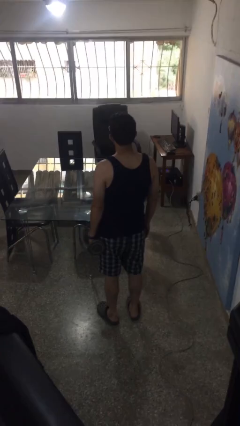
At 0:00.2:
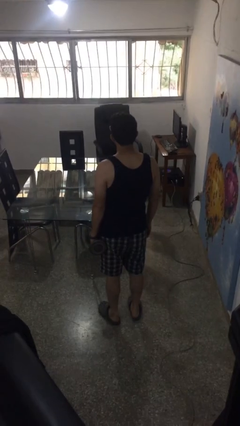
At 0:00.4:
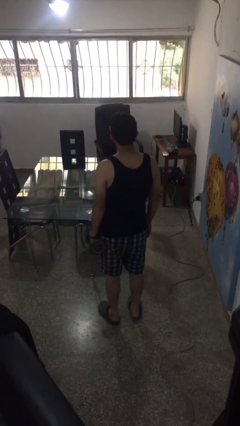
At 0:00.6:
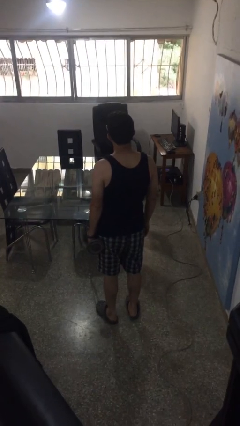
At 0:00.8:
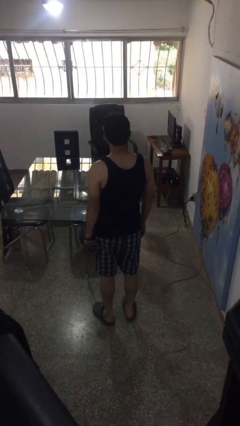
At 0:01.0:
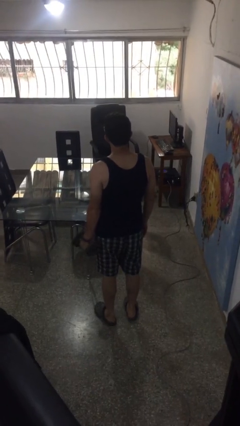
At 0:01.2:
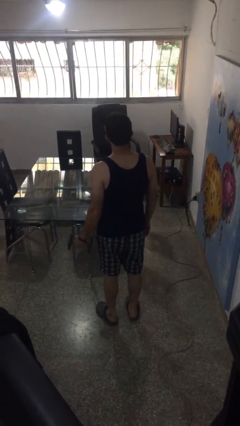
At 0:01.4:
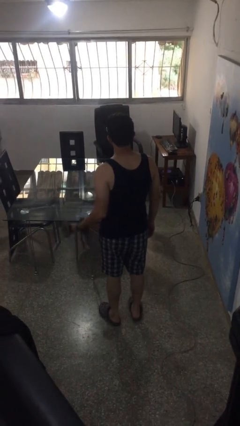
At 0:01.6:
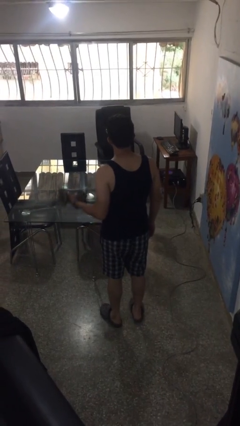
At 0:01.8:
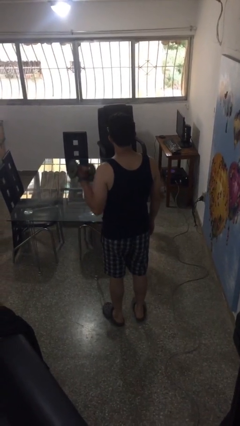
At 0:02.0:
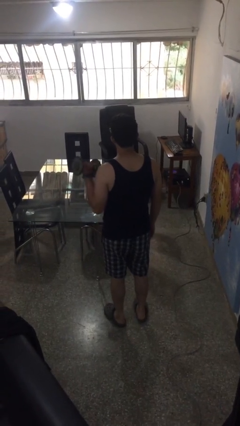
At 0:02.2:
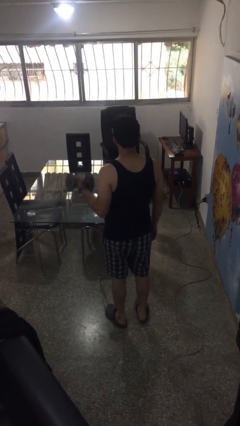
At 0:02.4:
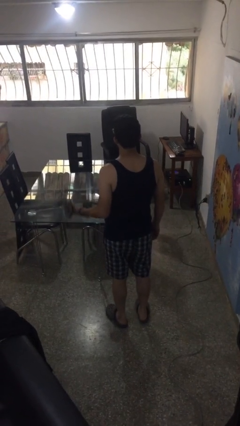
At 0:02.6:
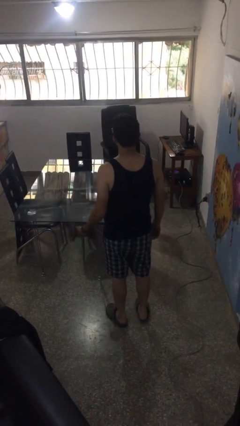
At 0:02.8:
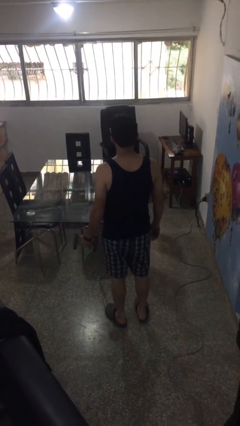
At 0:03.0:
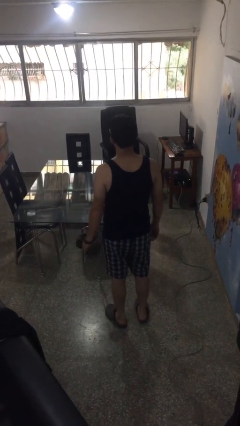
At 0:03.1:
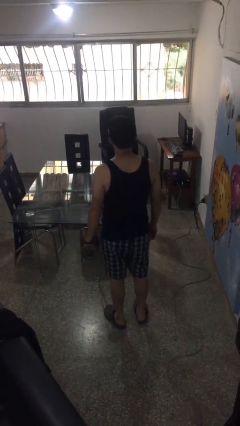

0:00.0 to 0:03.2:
person lifts dumbbells

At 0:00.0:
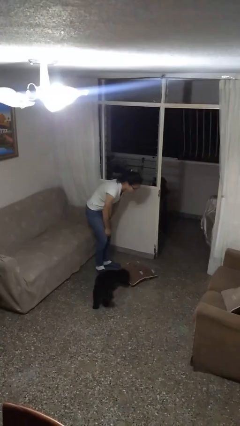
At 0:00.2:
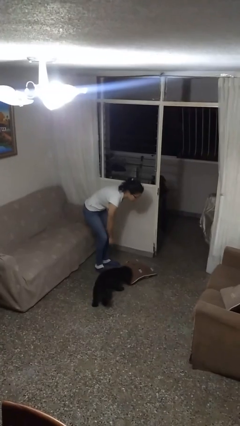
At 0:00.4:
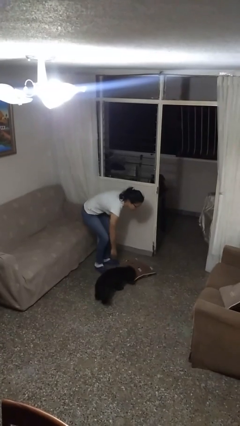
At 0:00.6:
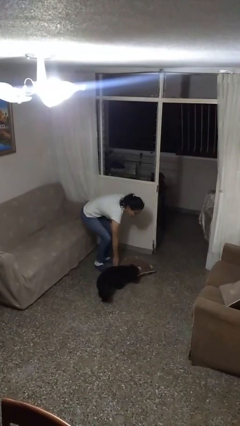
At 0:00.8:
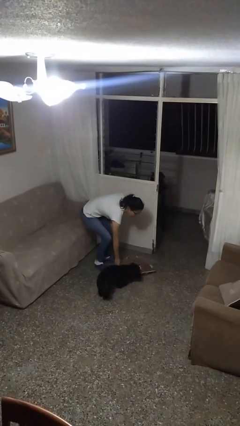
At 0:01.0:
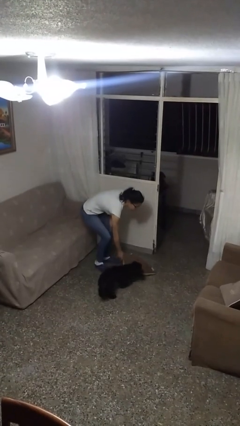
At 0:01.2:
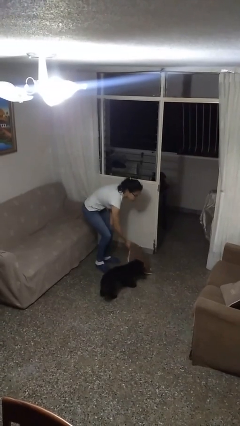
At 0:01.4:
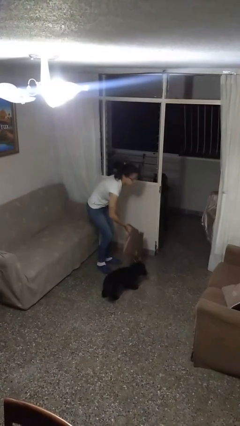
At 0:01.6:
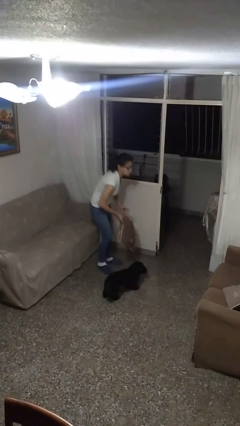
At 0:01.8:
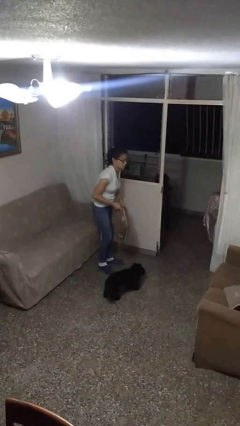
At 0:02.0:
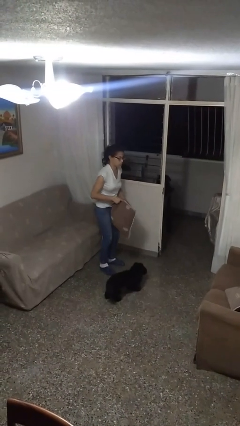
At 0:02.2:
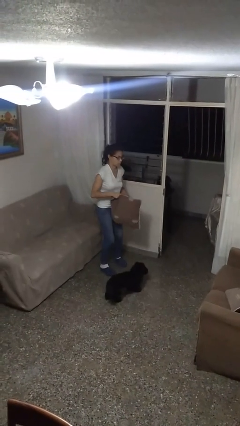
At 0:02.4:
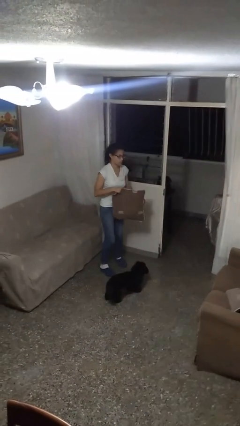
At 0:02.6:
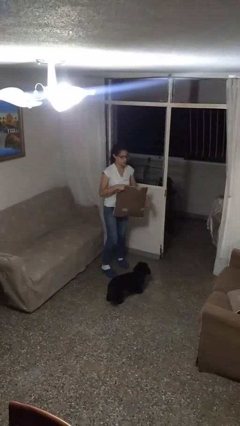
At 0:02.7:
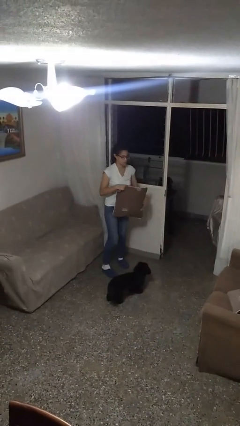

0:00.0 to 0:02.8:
person picks up object from floor

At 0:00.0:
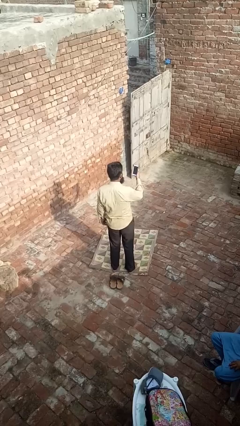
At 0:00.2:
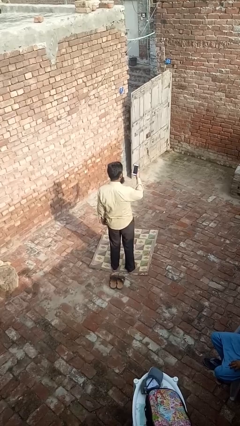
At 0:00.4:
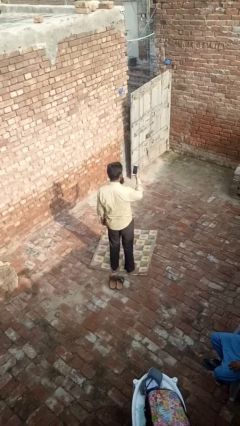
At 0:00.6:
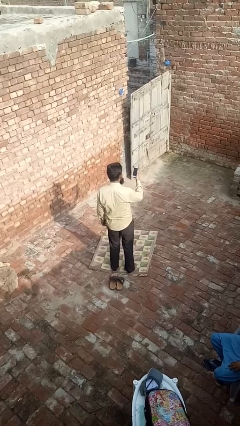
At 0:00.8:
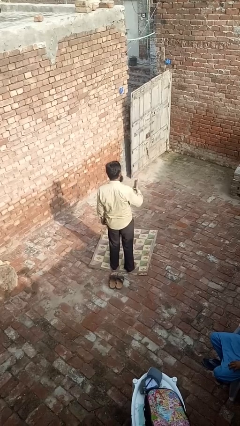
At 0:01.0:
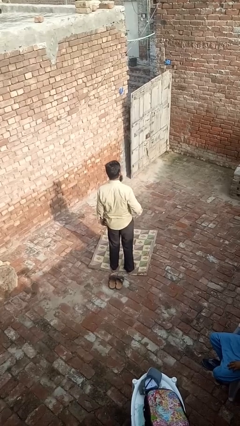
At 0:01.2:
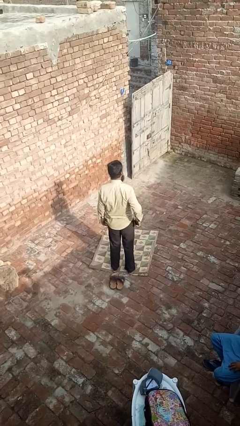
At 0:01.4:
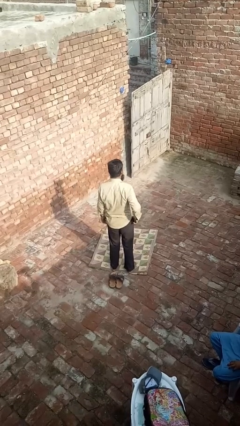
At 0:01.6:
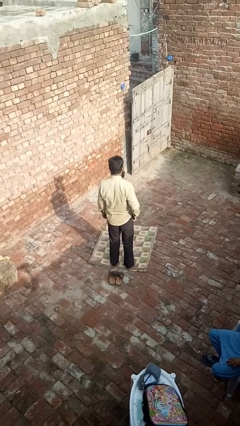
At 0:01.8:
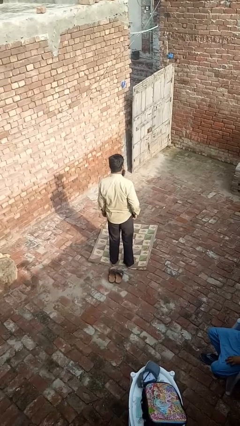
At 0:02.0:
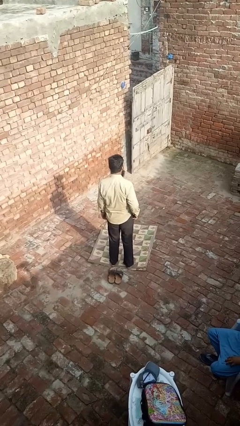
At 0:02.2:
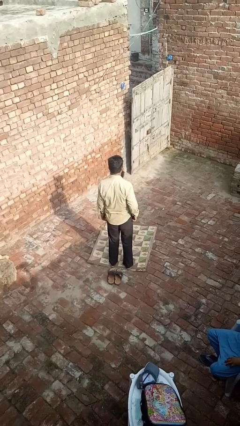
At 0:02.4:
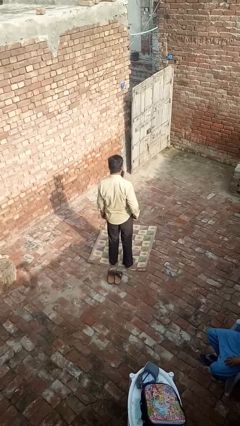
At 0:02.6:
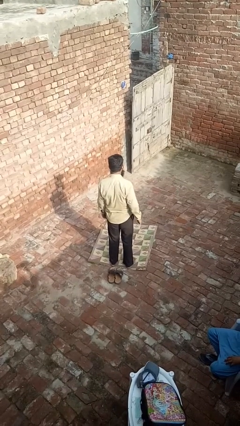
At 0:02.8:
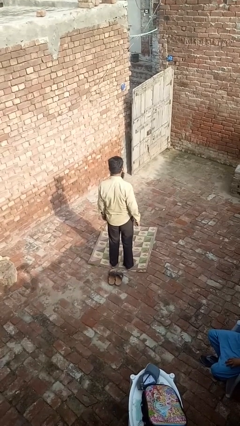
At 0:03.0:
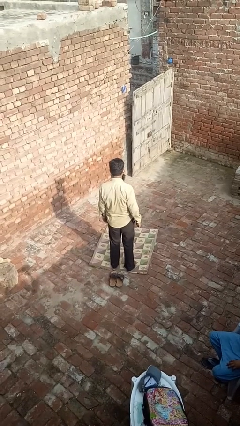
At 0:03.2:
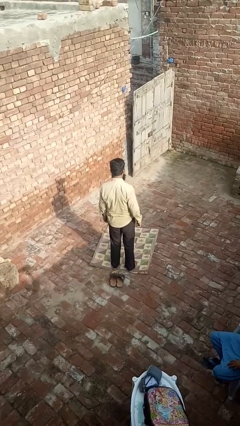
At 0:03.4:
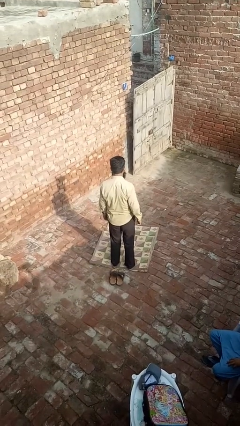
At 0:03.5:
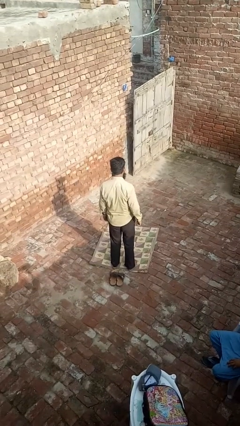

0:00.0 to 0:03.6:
person puts phone into pocket

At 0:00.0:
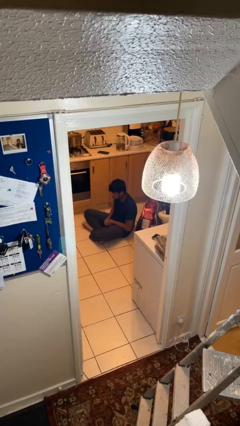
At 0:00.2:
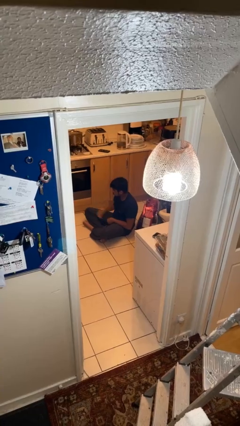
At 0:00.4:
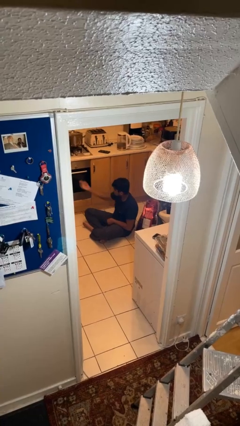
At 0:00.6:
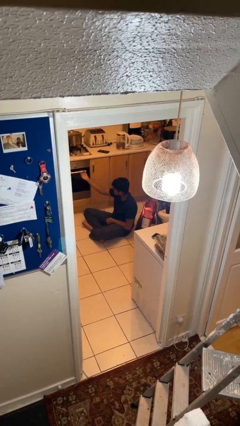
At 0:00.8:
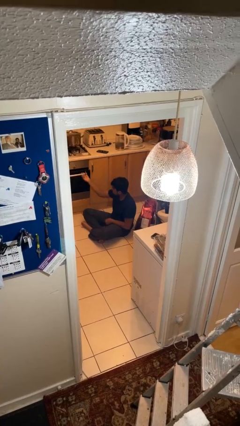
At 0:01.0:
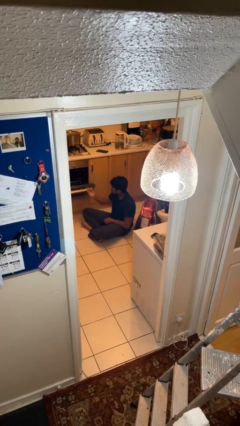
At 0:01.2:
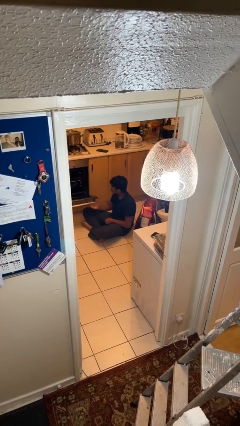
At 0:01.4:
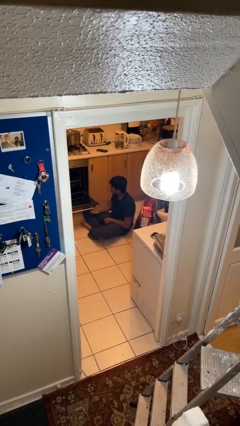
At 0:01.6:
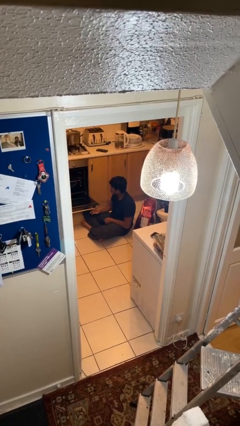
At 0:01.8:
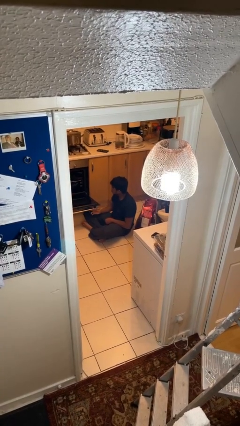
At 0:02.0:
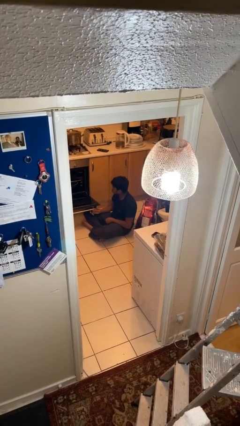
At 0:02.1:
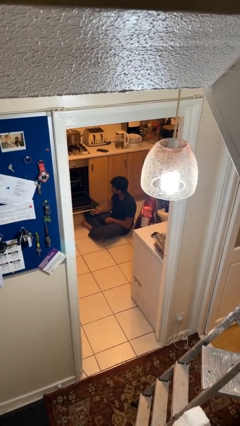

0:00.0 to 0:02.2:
person opens oven door

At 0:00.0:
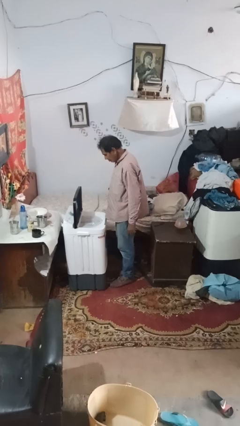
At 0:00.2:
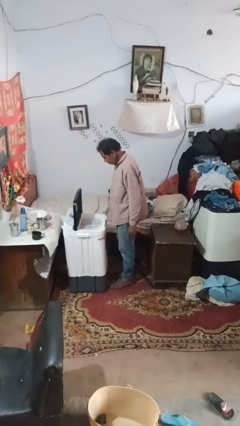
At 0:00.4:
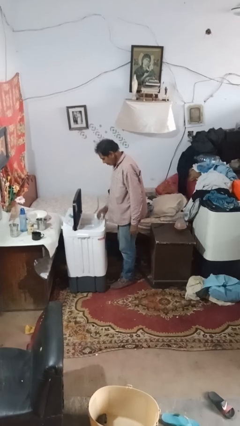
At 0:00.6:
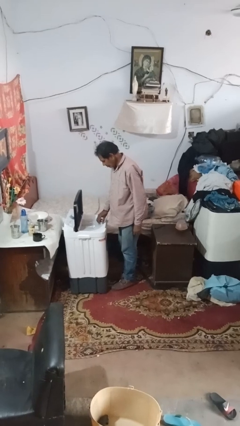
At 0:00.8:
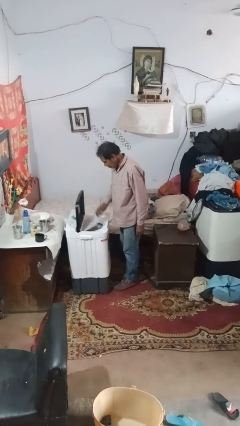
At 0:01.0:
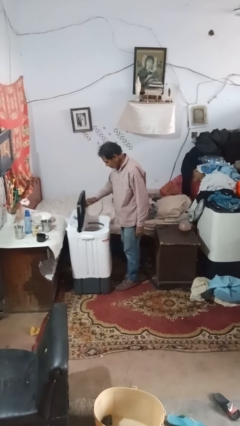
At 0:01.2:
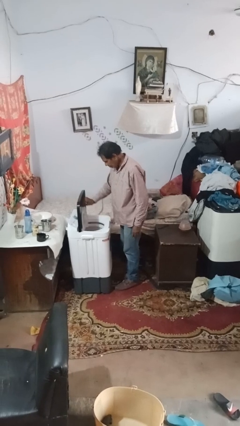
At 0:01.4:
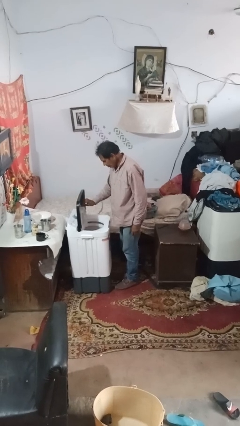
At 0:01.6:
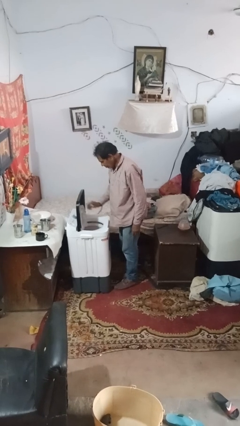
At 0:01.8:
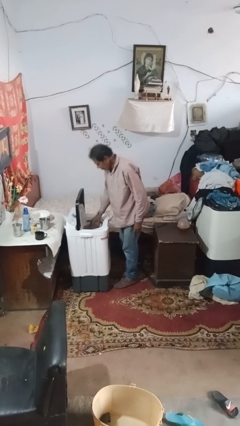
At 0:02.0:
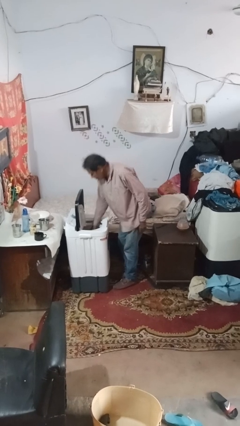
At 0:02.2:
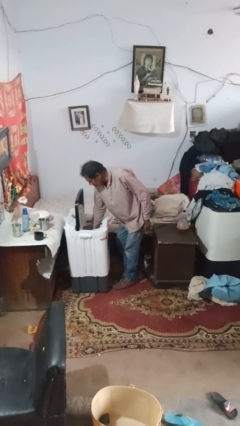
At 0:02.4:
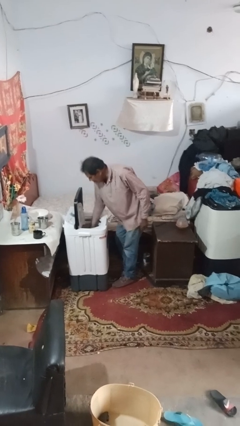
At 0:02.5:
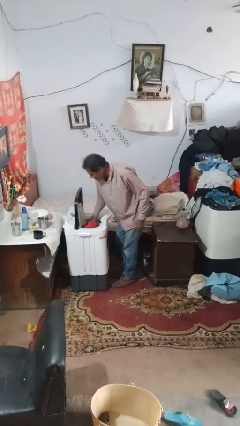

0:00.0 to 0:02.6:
person unloads dryer

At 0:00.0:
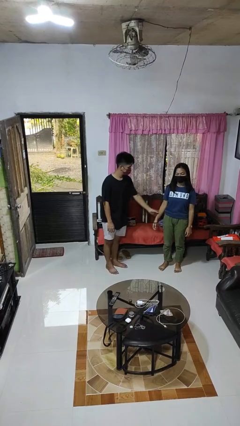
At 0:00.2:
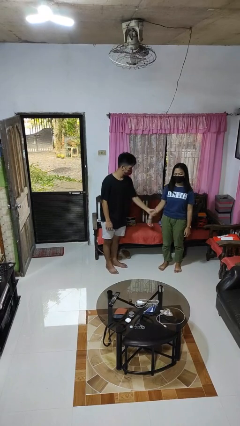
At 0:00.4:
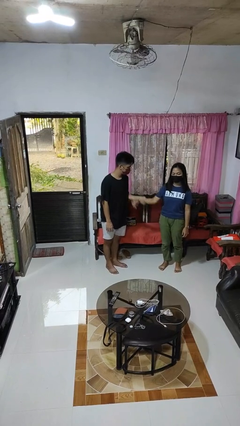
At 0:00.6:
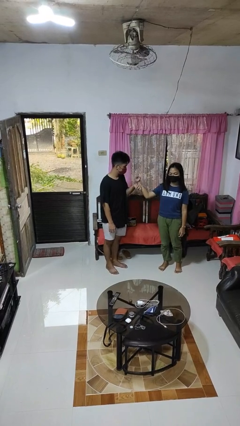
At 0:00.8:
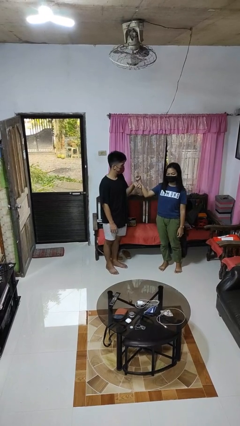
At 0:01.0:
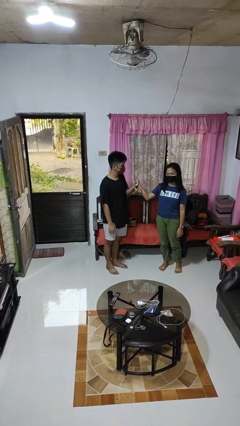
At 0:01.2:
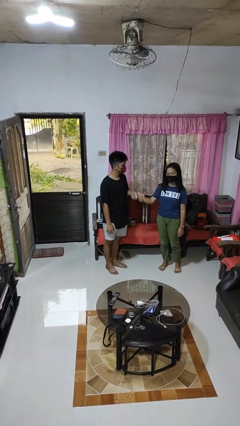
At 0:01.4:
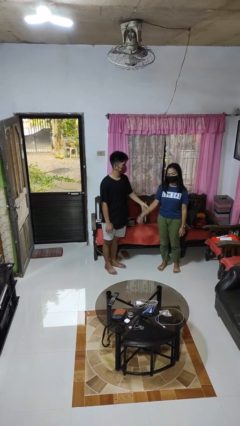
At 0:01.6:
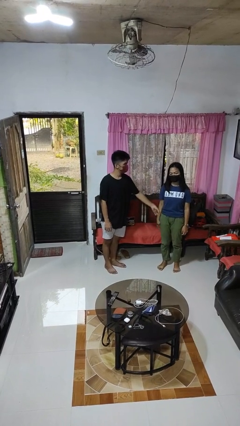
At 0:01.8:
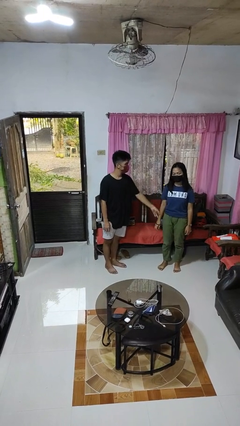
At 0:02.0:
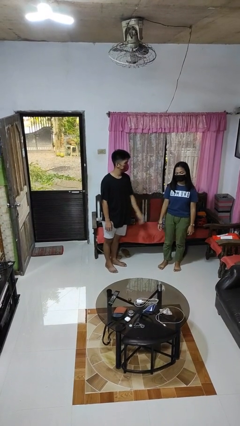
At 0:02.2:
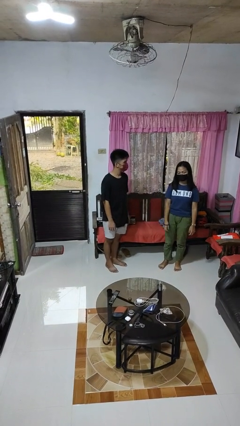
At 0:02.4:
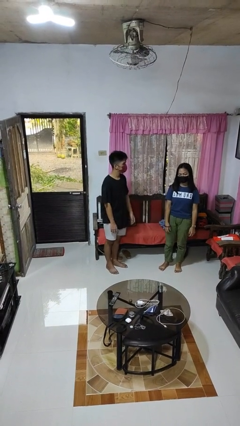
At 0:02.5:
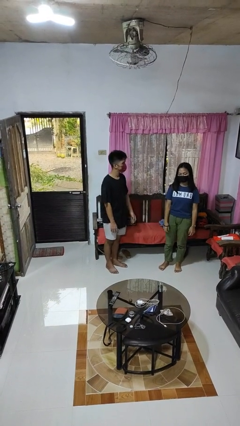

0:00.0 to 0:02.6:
person grabs person by forearm

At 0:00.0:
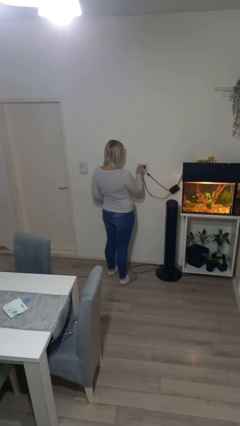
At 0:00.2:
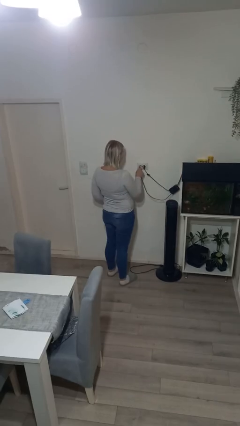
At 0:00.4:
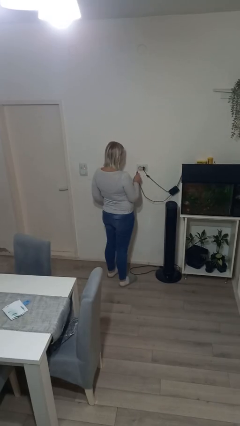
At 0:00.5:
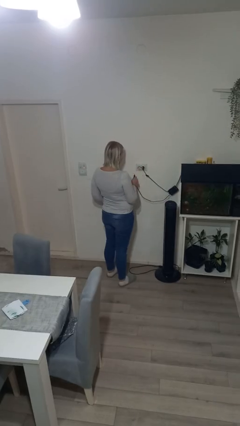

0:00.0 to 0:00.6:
person unplugs from electrical socket
